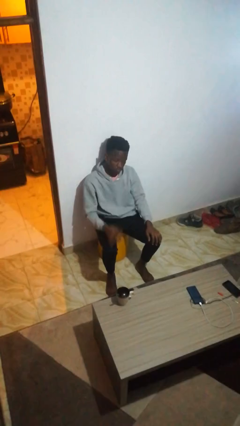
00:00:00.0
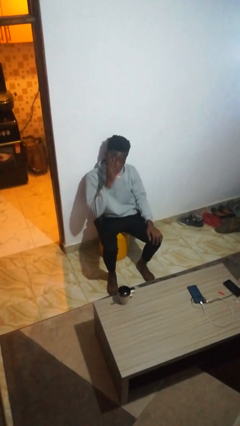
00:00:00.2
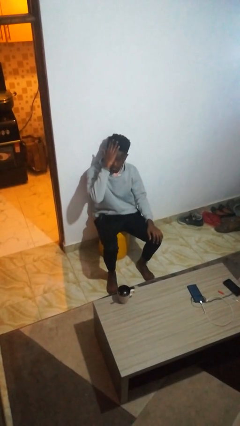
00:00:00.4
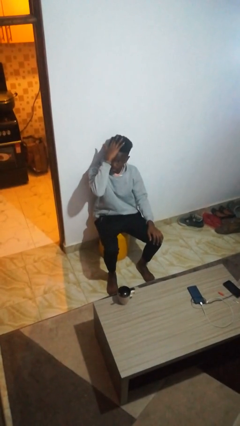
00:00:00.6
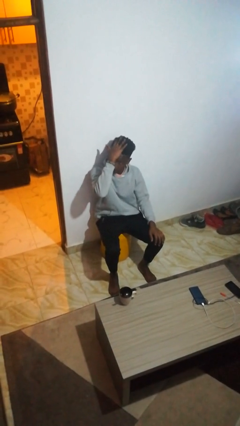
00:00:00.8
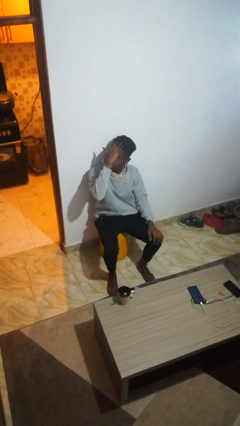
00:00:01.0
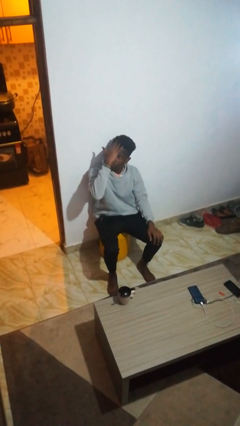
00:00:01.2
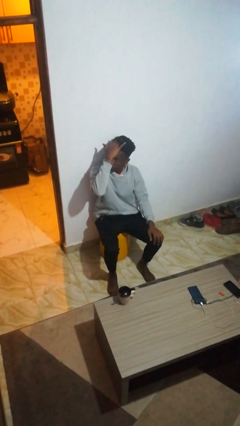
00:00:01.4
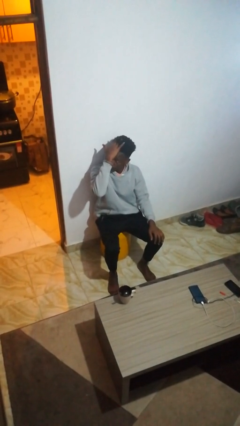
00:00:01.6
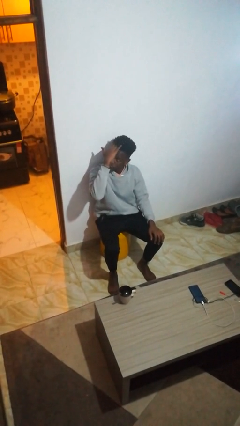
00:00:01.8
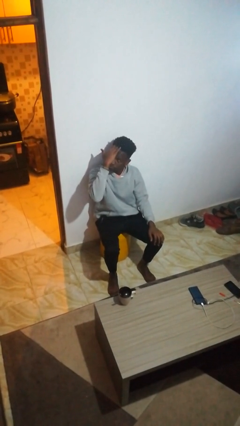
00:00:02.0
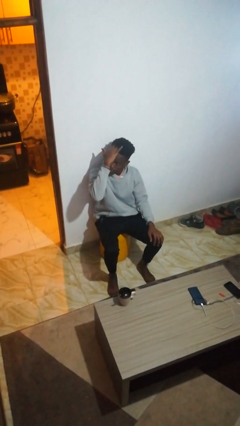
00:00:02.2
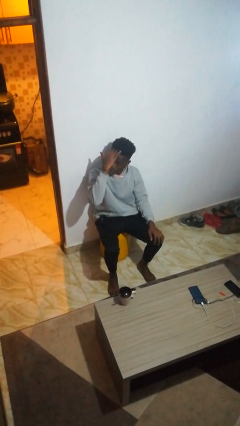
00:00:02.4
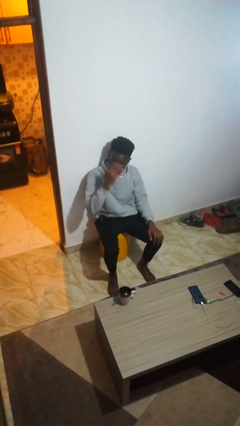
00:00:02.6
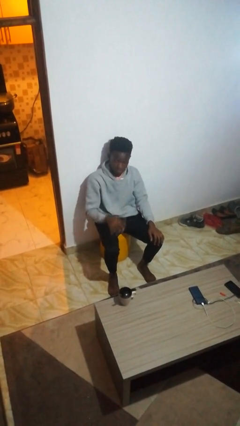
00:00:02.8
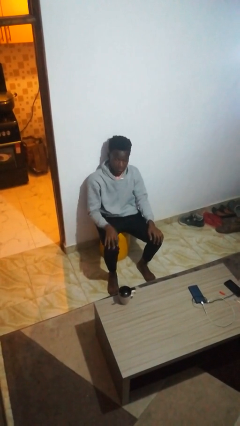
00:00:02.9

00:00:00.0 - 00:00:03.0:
person strokes hair

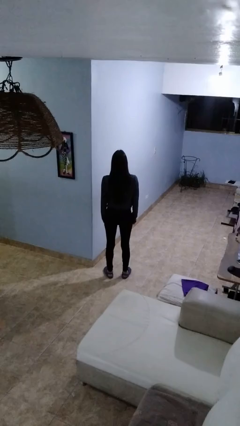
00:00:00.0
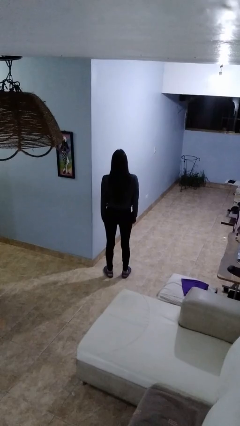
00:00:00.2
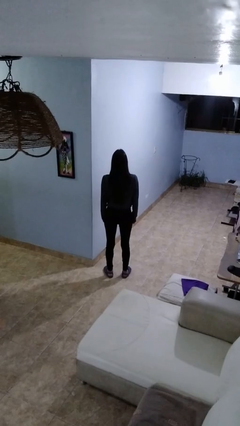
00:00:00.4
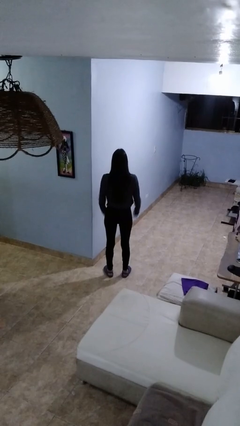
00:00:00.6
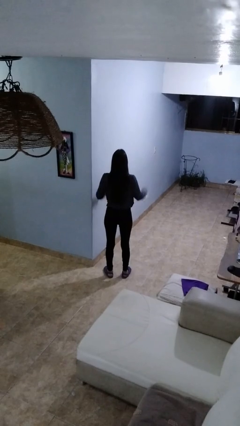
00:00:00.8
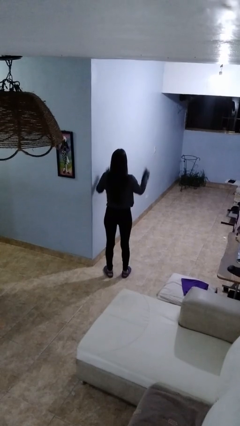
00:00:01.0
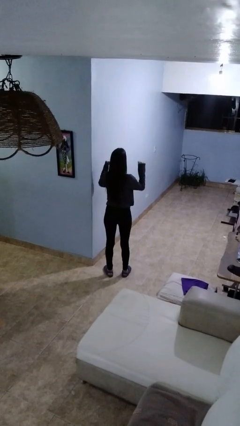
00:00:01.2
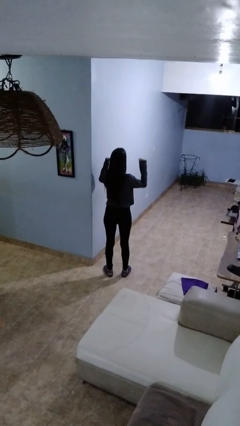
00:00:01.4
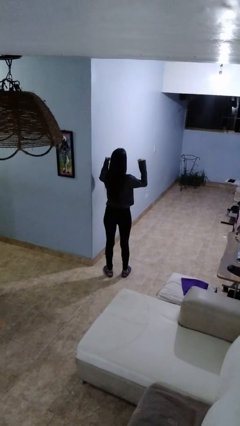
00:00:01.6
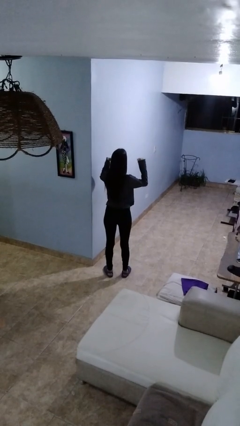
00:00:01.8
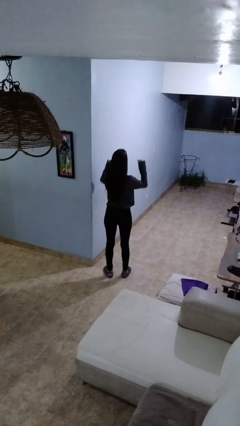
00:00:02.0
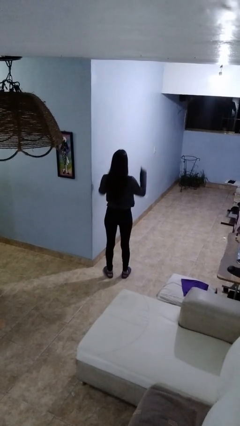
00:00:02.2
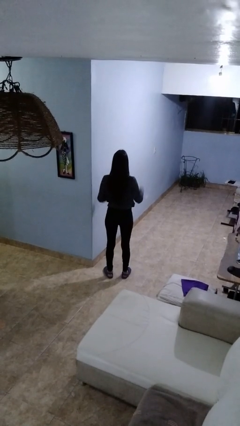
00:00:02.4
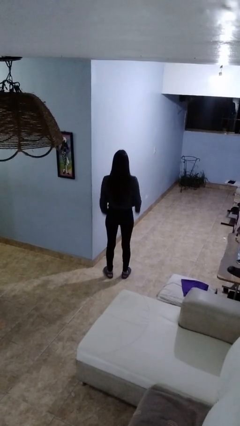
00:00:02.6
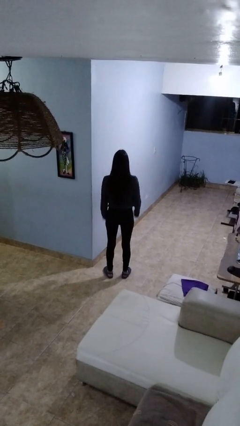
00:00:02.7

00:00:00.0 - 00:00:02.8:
person gestures behind me

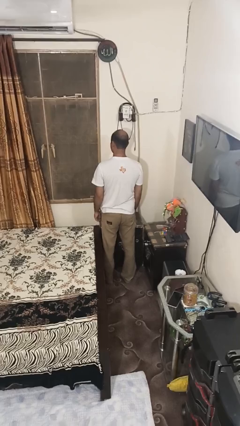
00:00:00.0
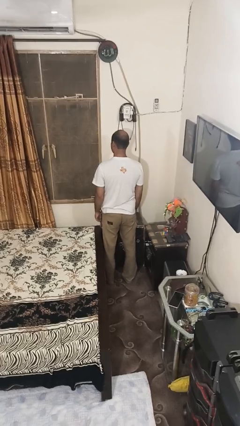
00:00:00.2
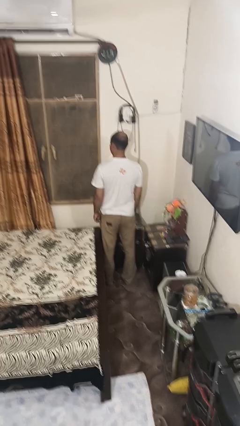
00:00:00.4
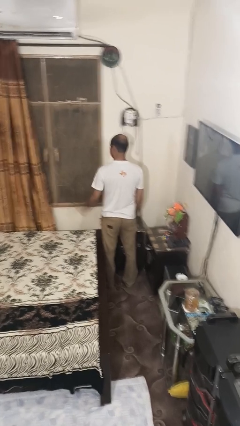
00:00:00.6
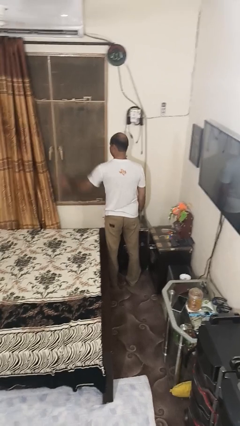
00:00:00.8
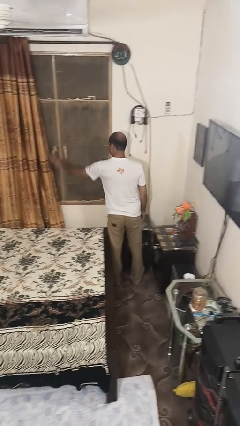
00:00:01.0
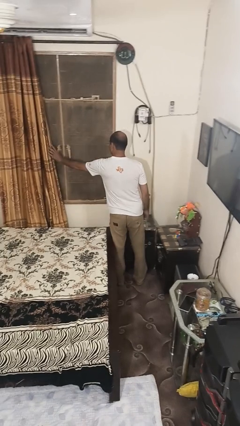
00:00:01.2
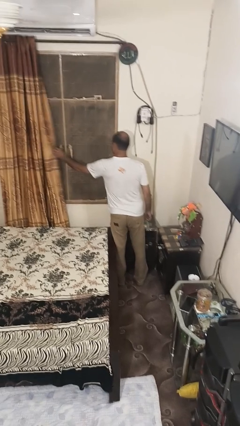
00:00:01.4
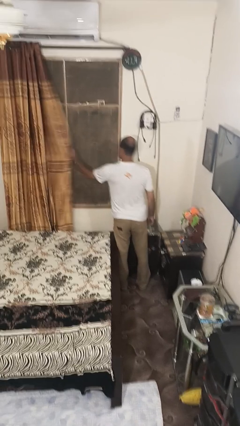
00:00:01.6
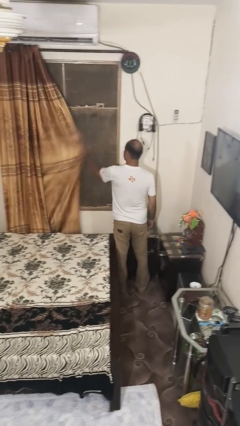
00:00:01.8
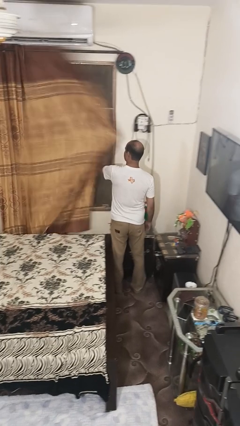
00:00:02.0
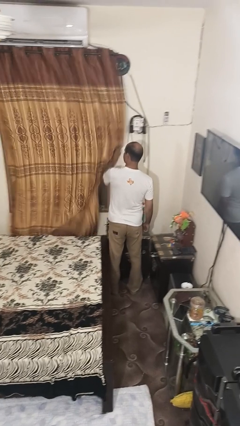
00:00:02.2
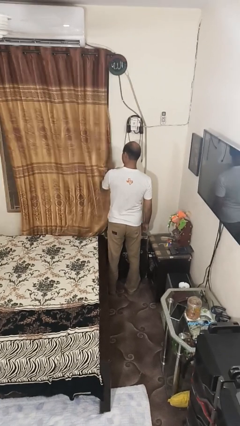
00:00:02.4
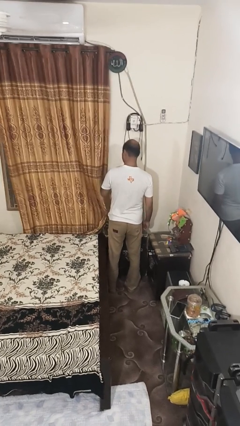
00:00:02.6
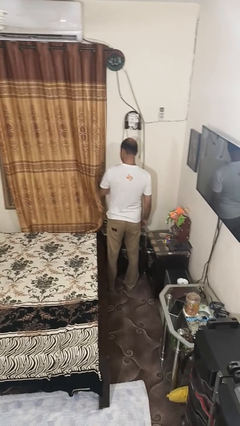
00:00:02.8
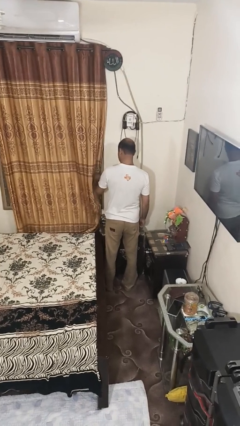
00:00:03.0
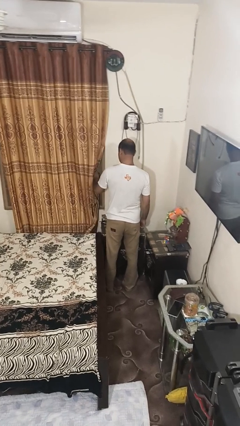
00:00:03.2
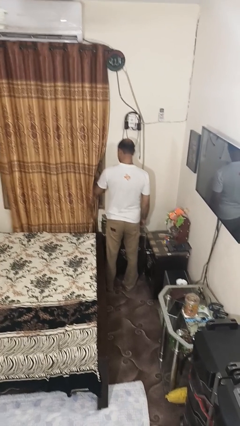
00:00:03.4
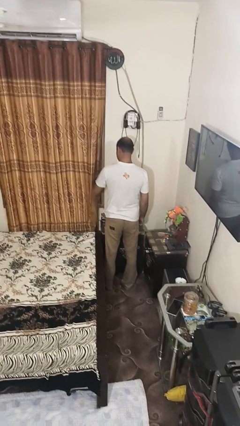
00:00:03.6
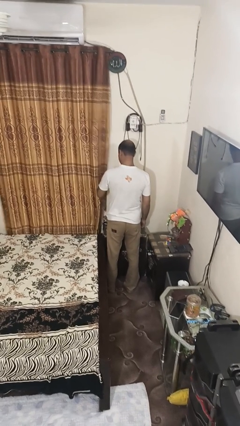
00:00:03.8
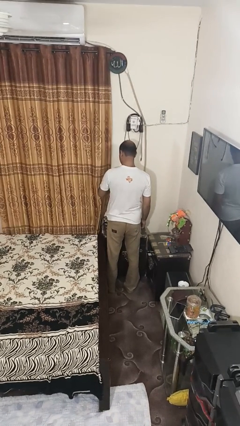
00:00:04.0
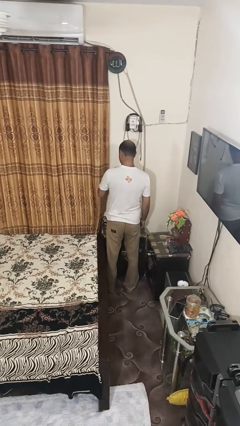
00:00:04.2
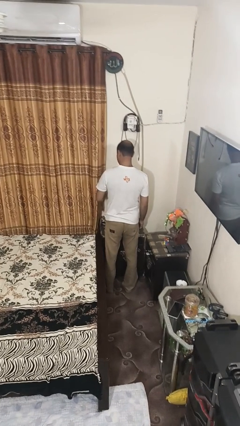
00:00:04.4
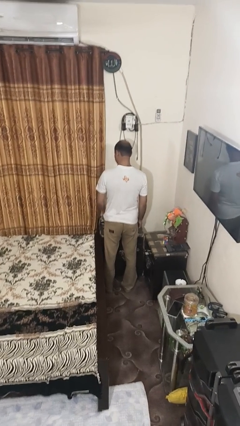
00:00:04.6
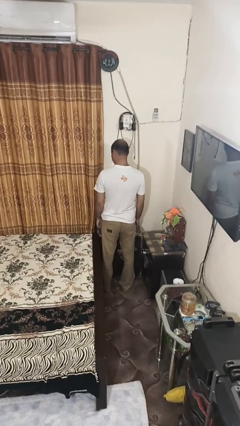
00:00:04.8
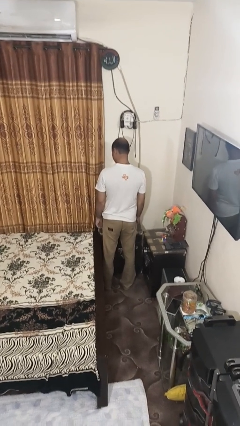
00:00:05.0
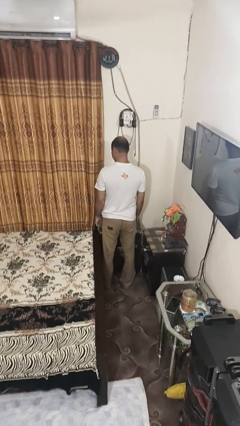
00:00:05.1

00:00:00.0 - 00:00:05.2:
person closes curtains

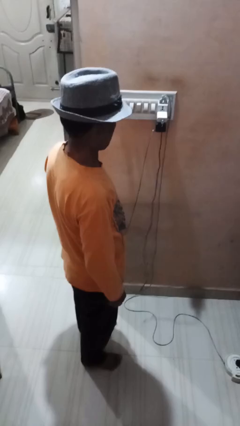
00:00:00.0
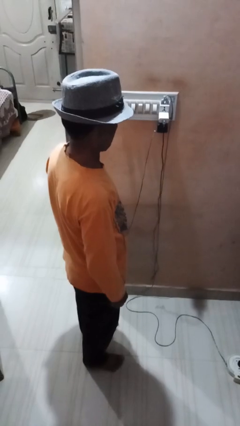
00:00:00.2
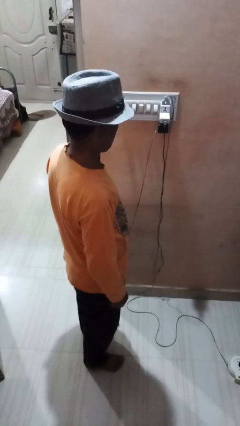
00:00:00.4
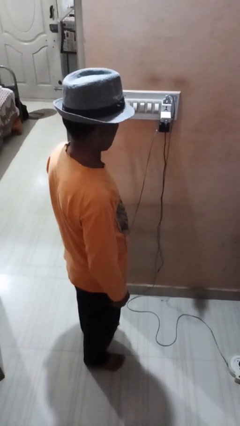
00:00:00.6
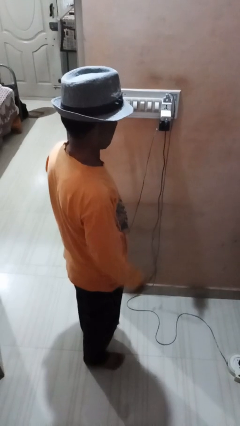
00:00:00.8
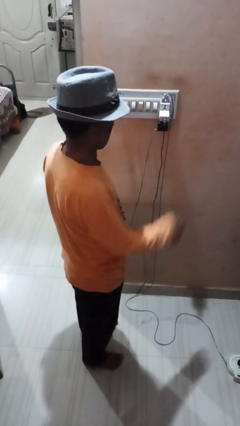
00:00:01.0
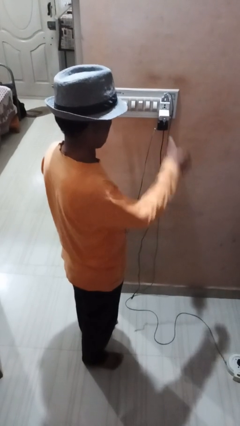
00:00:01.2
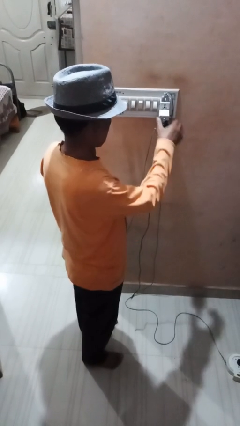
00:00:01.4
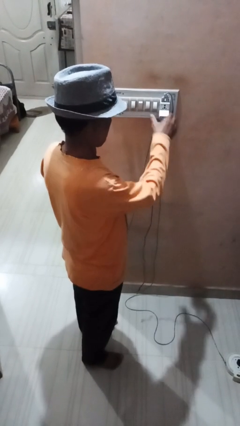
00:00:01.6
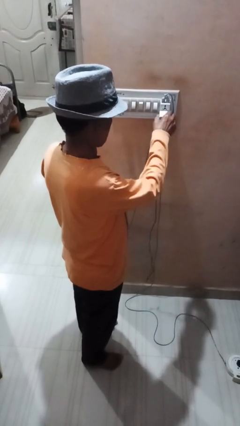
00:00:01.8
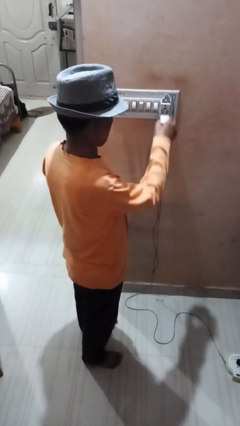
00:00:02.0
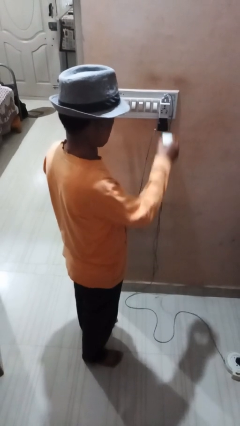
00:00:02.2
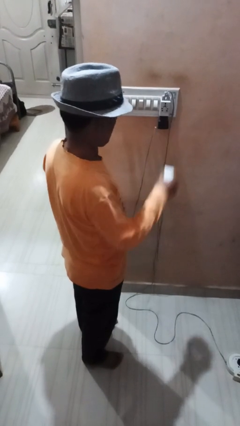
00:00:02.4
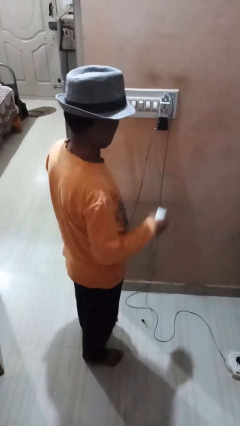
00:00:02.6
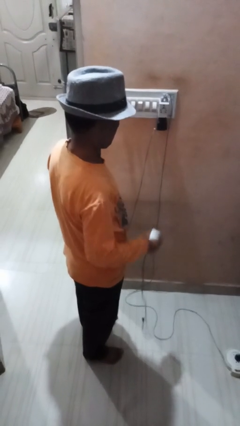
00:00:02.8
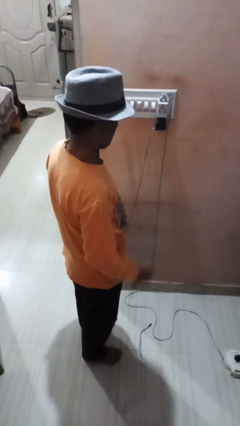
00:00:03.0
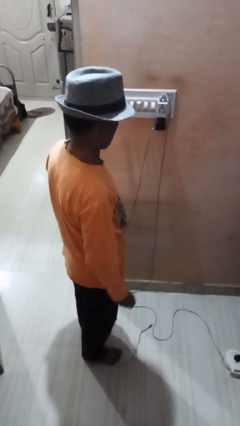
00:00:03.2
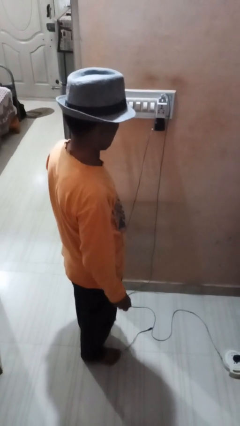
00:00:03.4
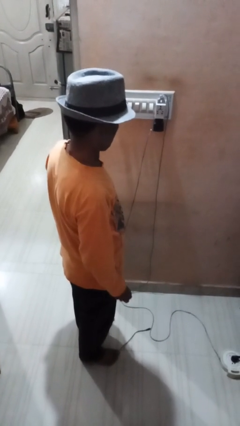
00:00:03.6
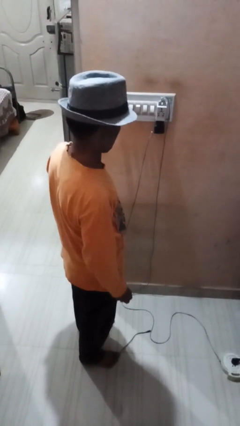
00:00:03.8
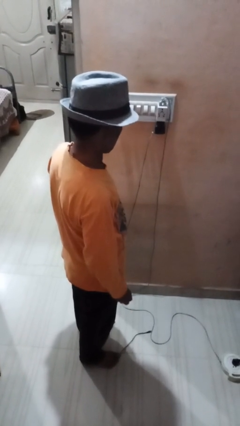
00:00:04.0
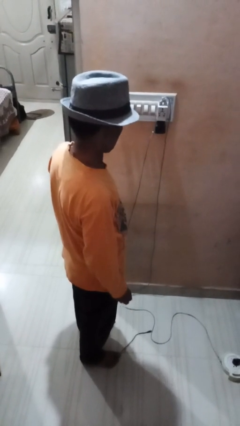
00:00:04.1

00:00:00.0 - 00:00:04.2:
person unplugs from electrical socket

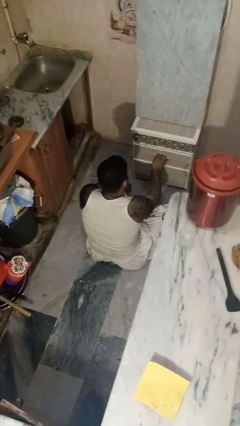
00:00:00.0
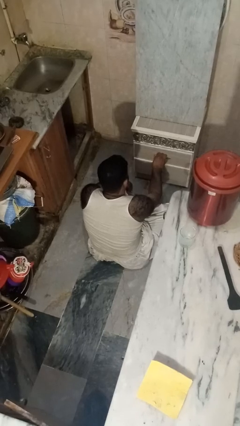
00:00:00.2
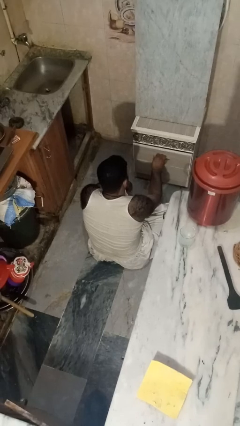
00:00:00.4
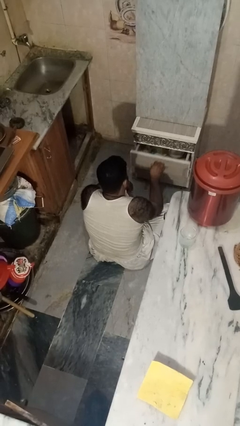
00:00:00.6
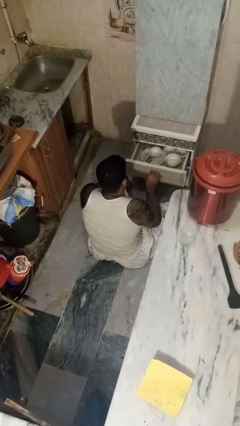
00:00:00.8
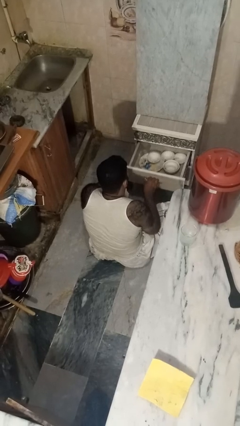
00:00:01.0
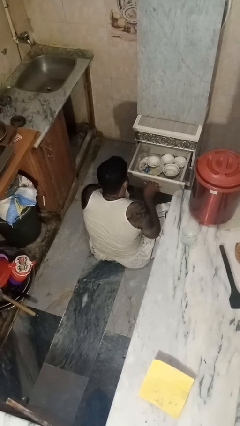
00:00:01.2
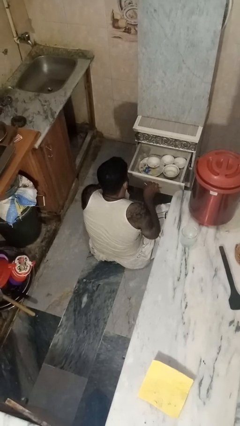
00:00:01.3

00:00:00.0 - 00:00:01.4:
person opens kitchen drawer

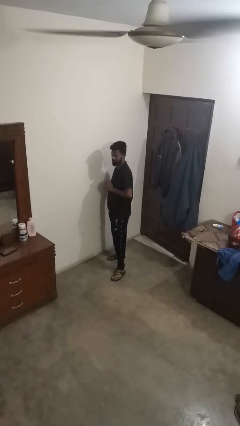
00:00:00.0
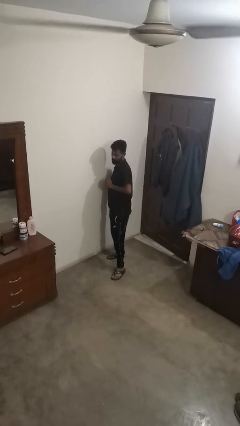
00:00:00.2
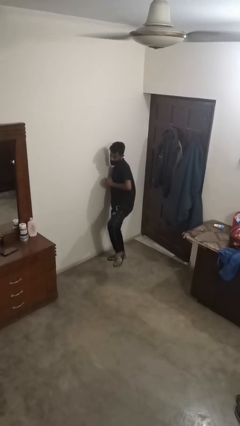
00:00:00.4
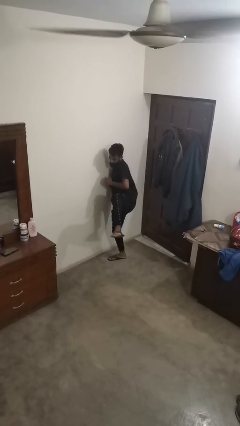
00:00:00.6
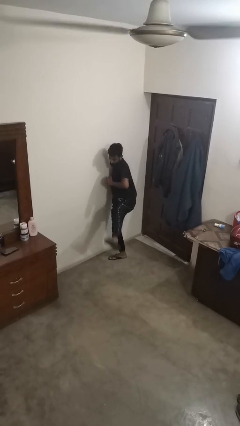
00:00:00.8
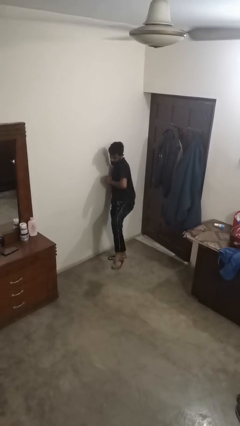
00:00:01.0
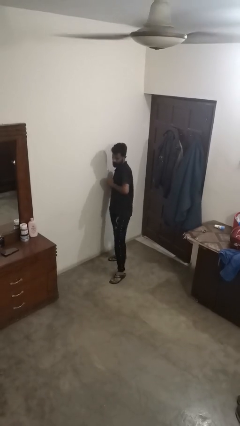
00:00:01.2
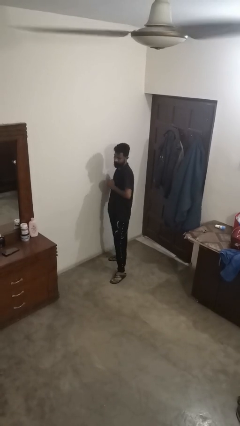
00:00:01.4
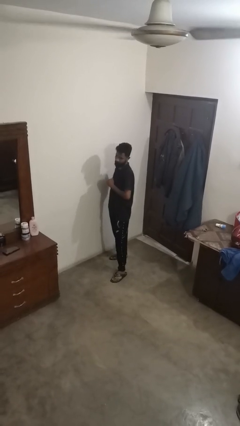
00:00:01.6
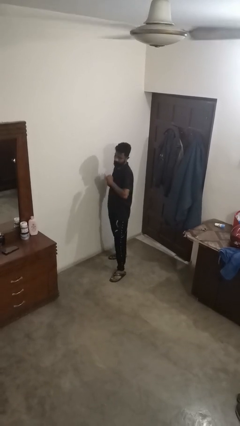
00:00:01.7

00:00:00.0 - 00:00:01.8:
person karate kicks
